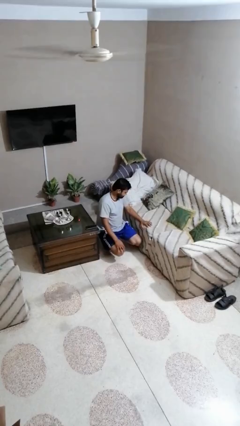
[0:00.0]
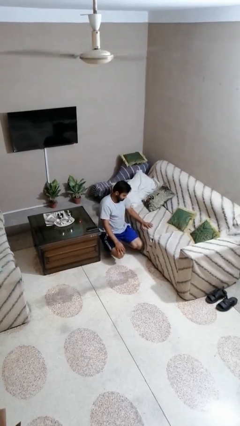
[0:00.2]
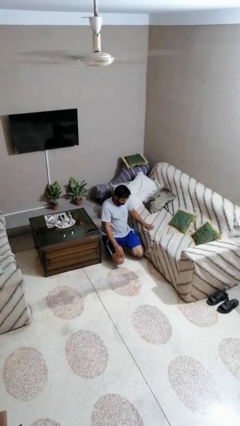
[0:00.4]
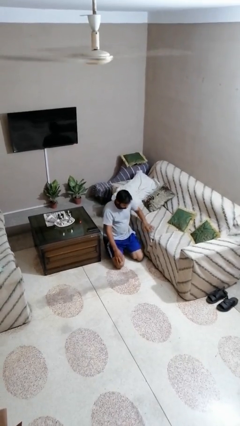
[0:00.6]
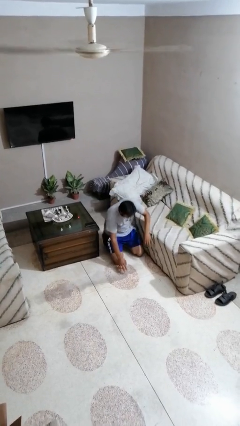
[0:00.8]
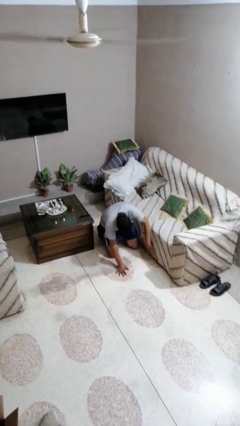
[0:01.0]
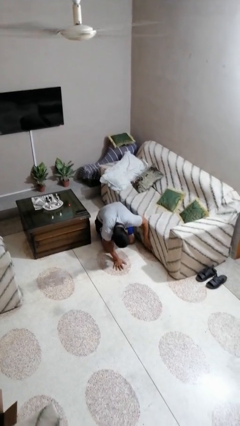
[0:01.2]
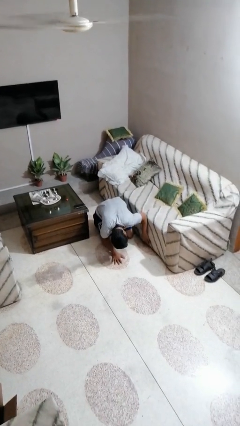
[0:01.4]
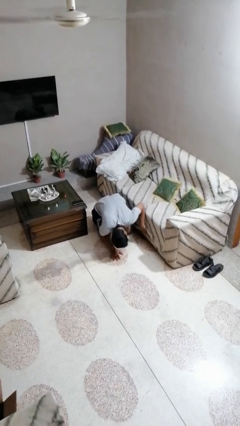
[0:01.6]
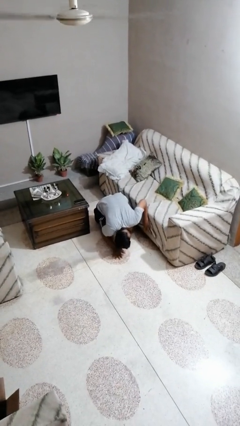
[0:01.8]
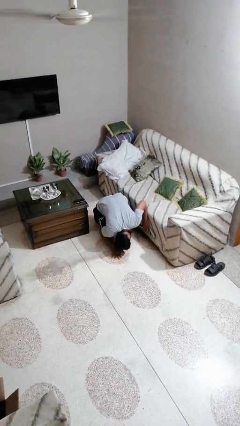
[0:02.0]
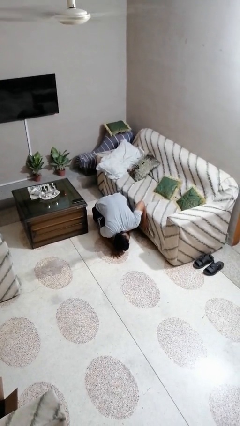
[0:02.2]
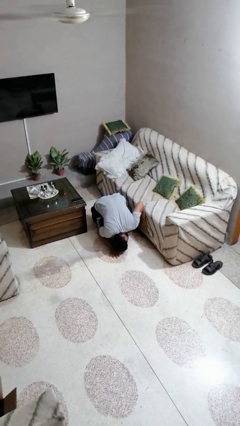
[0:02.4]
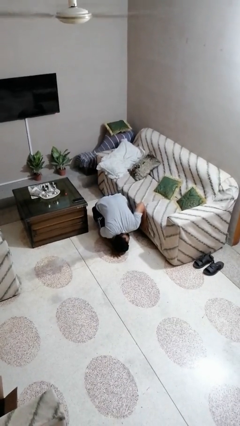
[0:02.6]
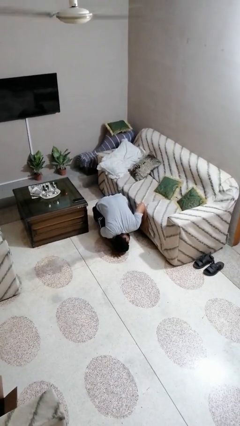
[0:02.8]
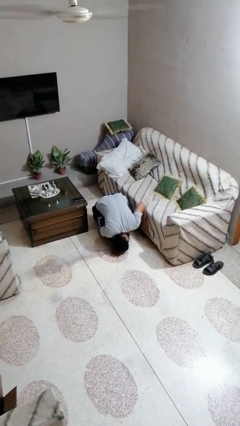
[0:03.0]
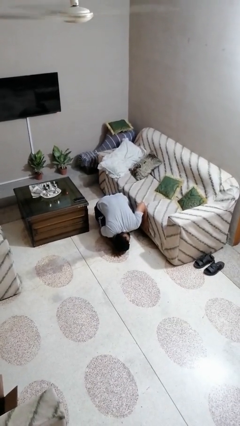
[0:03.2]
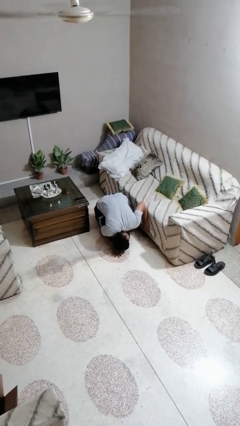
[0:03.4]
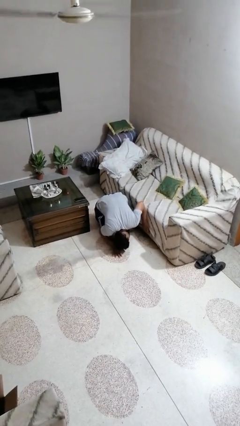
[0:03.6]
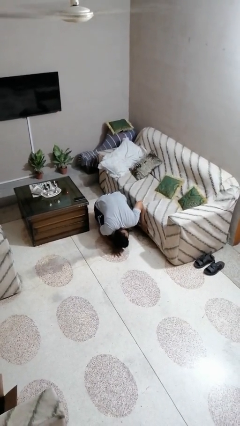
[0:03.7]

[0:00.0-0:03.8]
person searches under couch

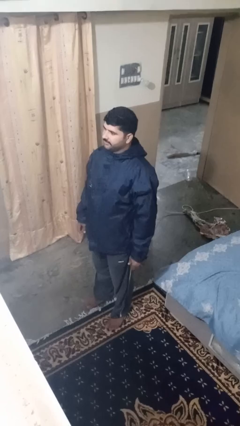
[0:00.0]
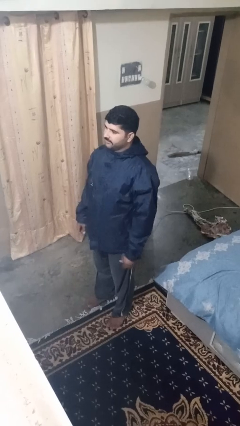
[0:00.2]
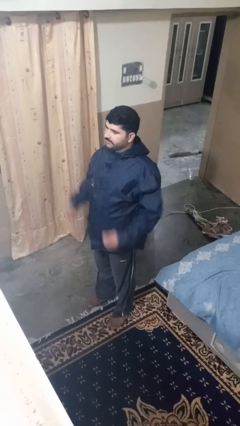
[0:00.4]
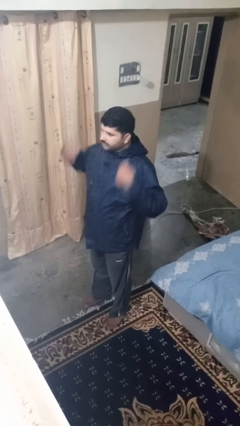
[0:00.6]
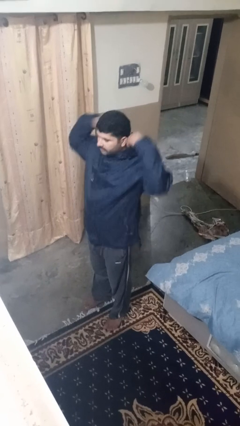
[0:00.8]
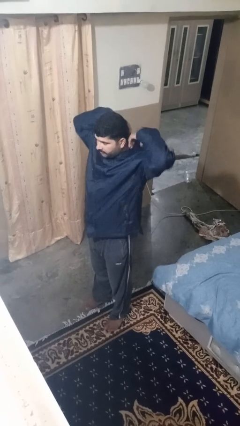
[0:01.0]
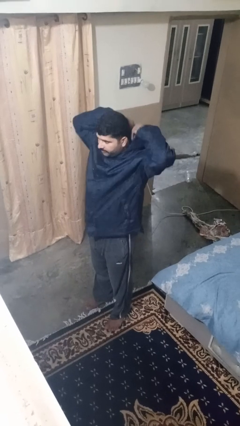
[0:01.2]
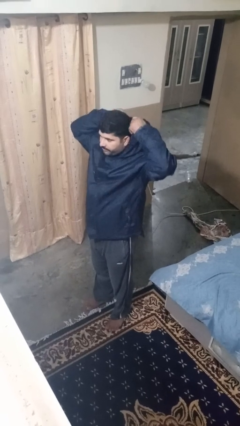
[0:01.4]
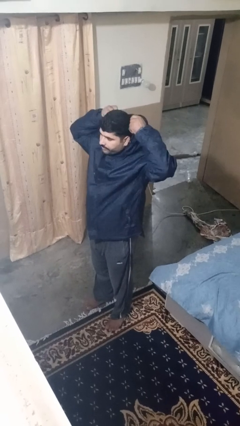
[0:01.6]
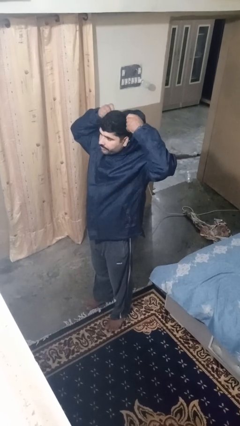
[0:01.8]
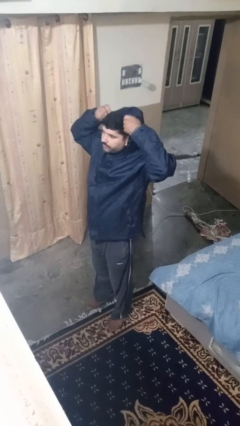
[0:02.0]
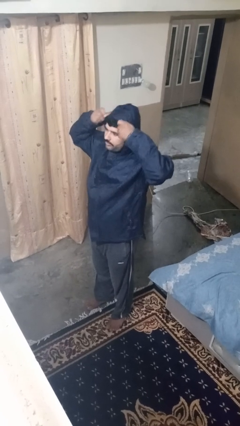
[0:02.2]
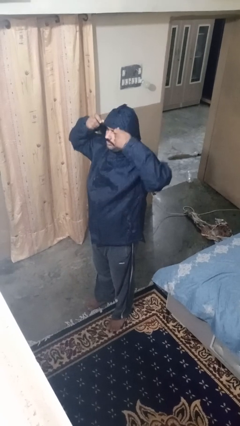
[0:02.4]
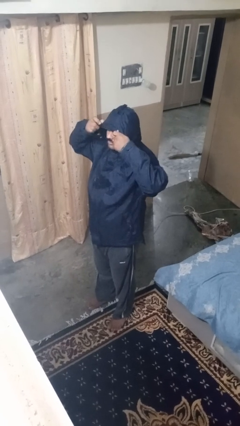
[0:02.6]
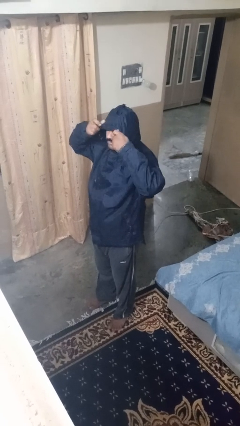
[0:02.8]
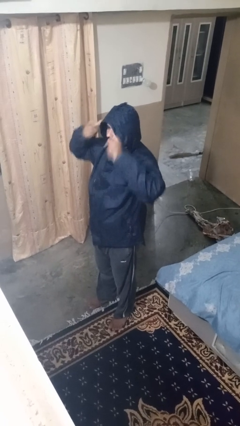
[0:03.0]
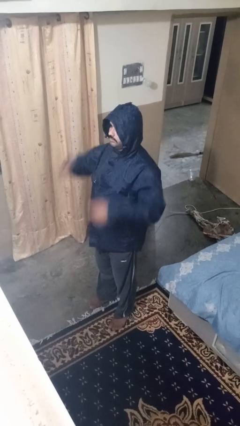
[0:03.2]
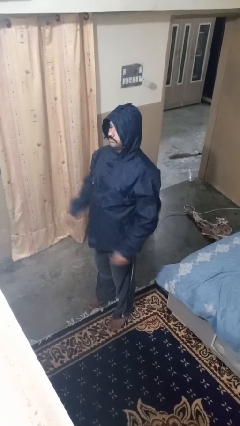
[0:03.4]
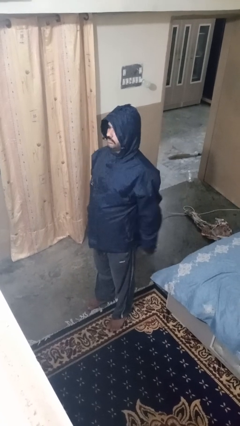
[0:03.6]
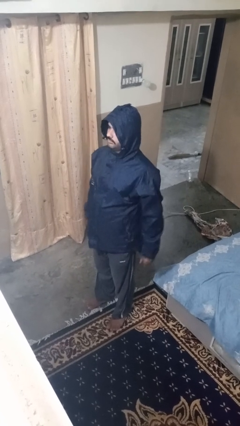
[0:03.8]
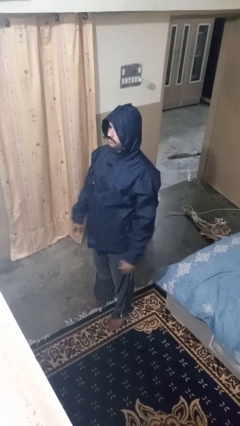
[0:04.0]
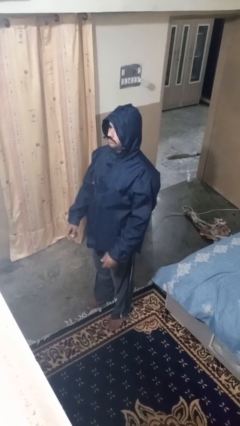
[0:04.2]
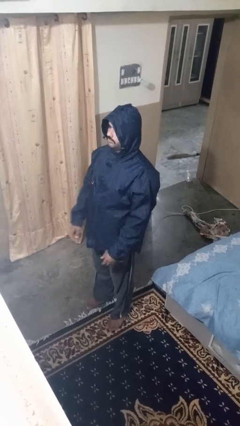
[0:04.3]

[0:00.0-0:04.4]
person puts on hoodie

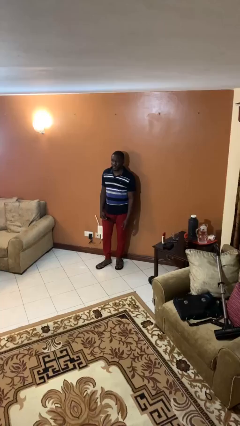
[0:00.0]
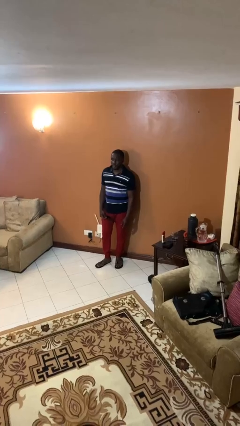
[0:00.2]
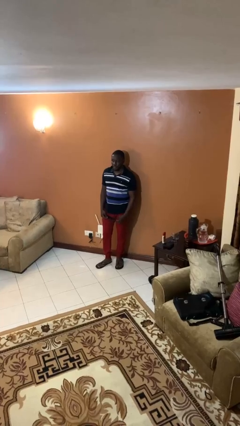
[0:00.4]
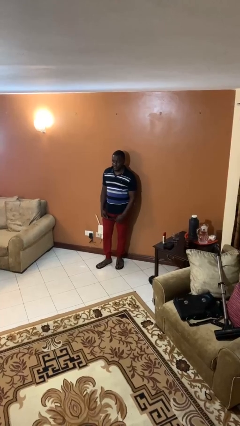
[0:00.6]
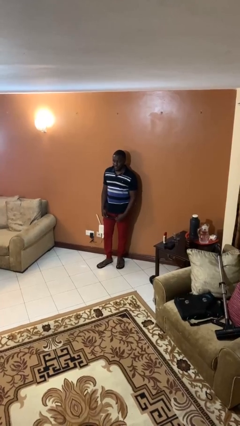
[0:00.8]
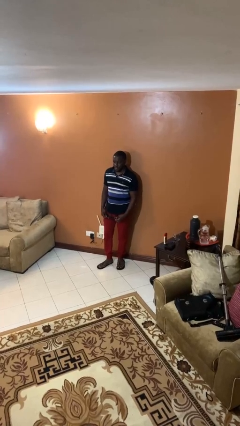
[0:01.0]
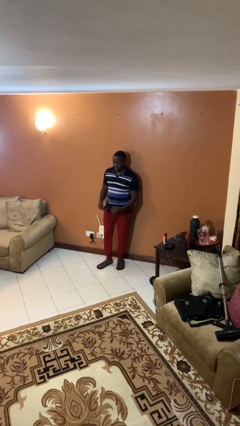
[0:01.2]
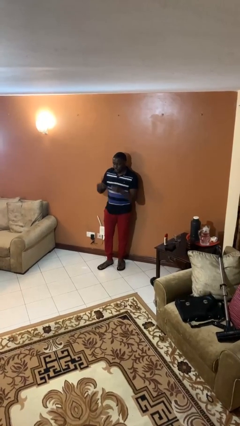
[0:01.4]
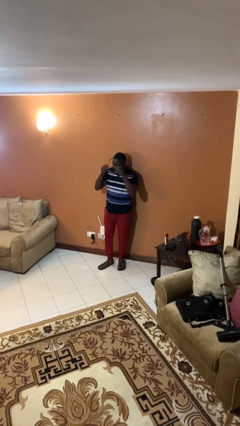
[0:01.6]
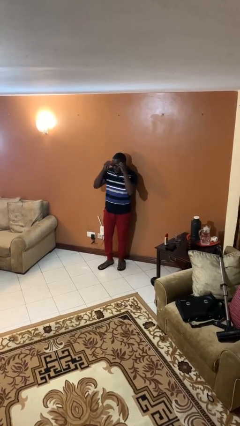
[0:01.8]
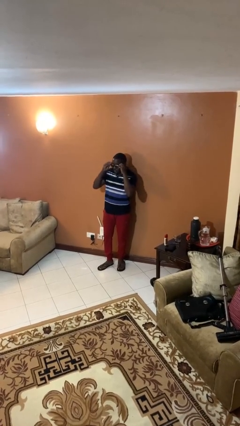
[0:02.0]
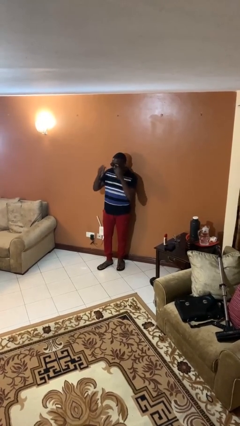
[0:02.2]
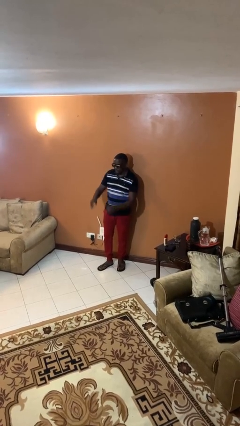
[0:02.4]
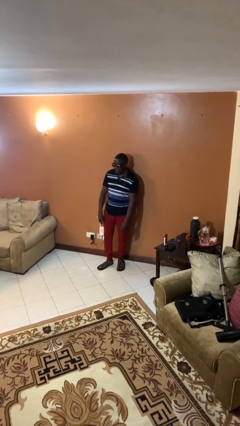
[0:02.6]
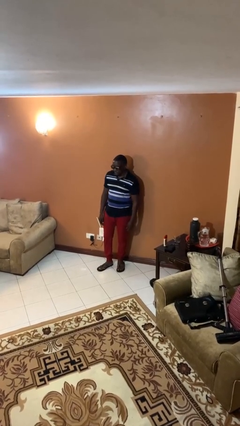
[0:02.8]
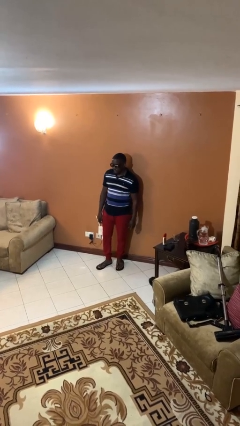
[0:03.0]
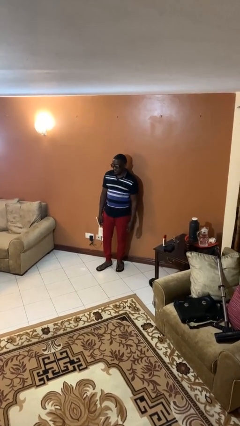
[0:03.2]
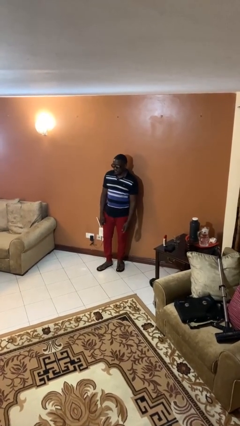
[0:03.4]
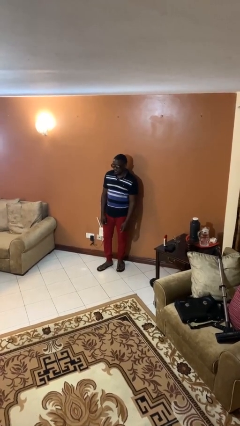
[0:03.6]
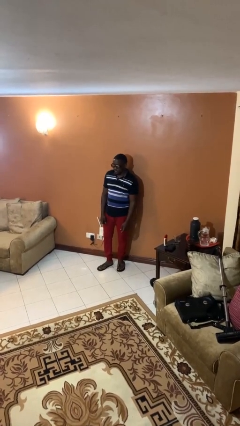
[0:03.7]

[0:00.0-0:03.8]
person puts on sunglasses

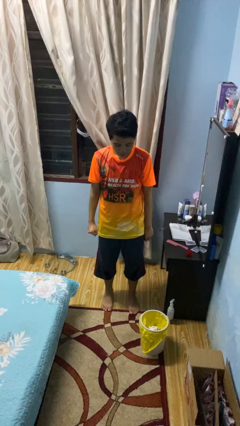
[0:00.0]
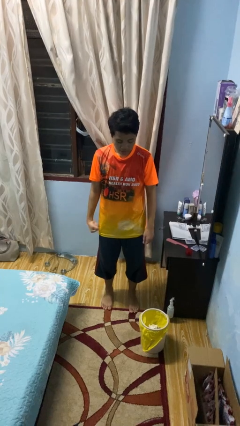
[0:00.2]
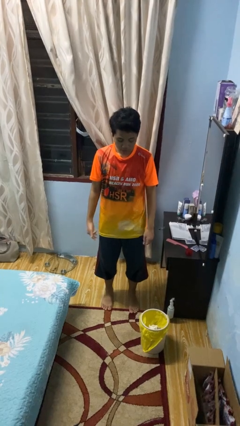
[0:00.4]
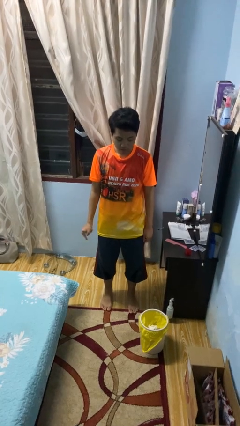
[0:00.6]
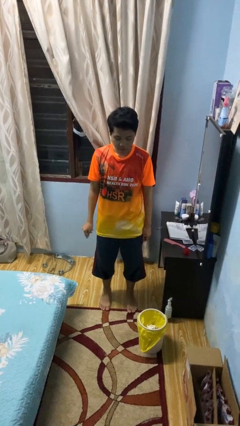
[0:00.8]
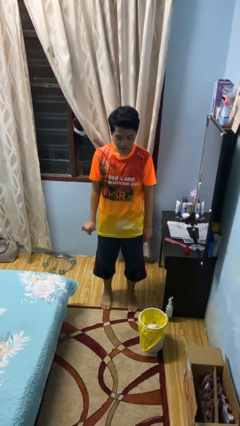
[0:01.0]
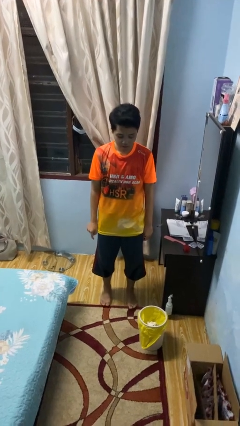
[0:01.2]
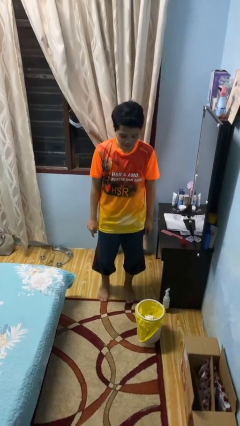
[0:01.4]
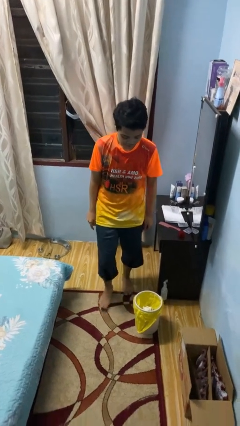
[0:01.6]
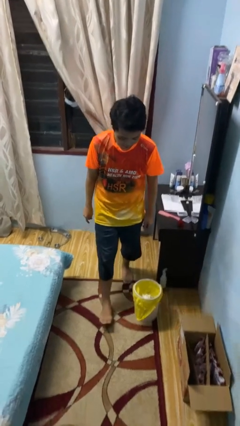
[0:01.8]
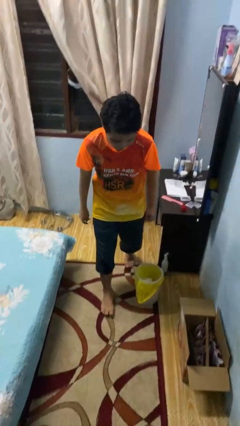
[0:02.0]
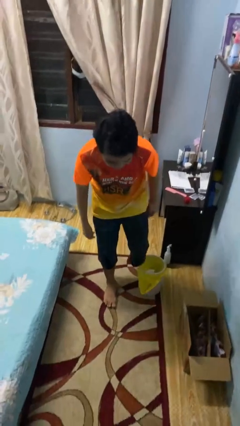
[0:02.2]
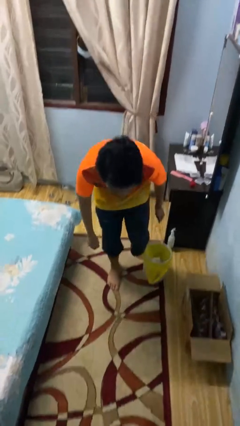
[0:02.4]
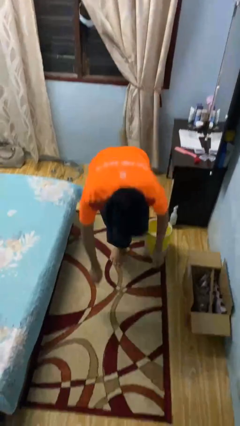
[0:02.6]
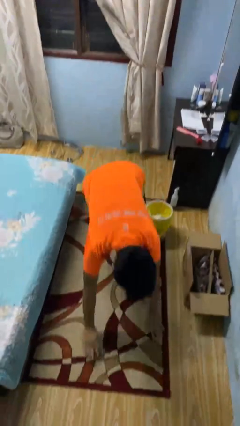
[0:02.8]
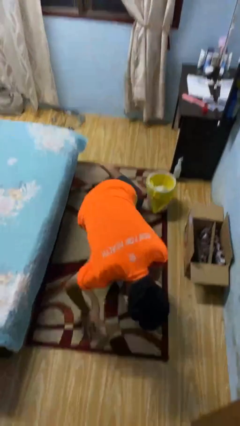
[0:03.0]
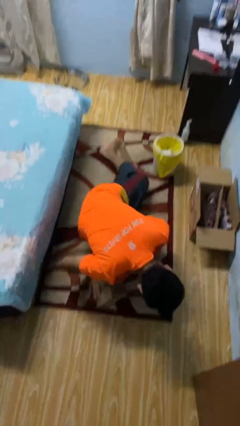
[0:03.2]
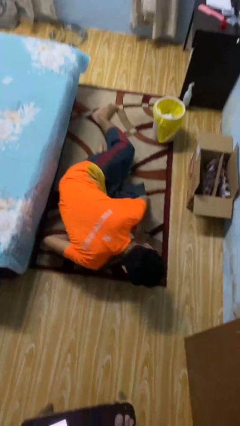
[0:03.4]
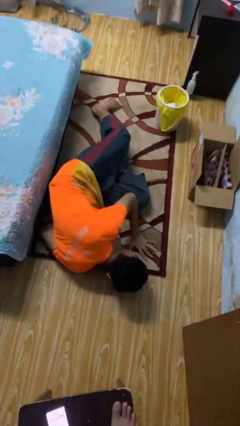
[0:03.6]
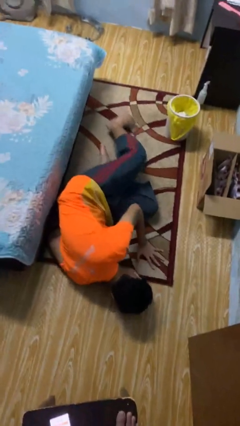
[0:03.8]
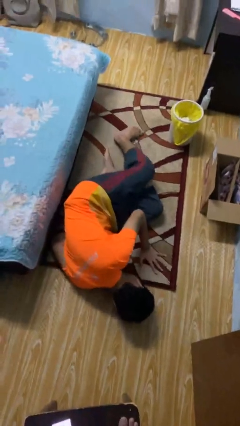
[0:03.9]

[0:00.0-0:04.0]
person trips on object on floor

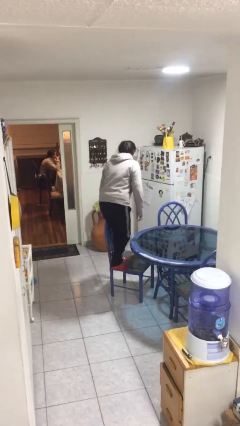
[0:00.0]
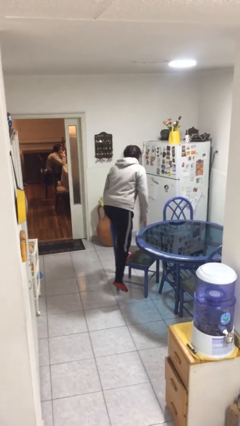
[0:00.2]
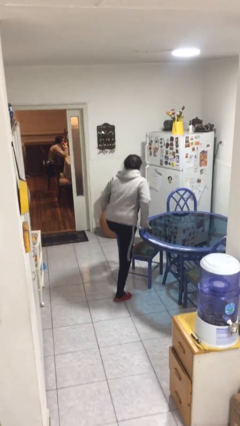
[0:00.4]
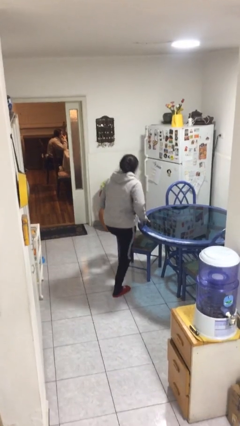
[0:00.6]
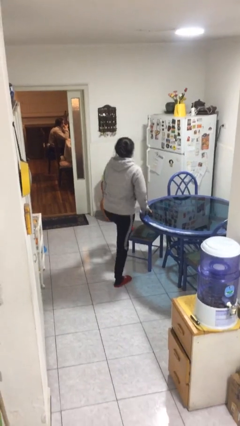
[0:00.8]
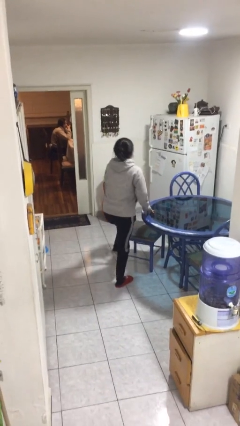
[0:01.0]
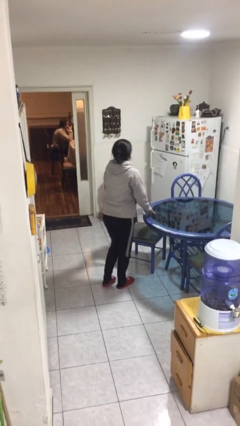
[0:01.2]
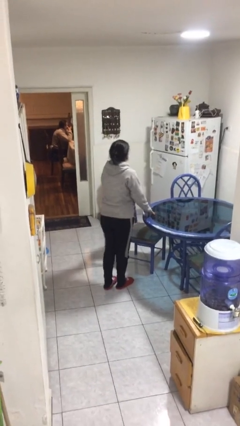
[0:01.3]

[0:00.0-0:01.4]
person climbs off chair

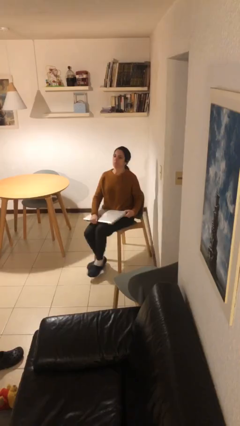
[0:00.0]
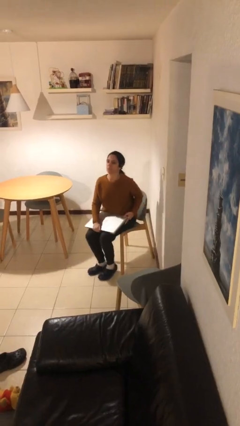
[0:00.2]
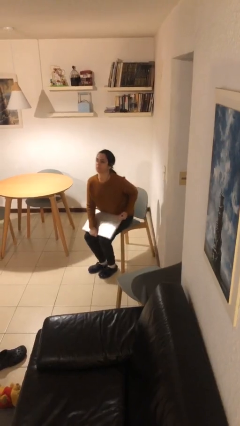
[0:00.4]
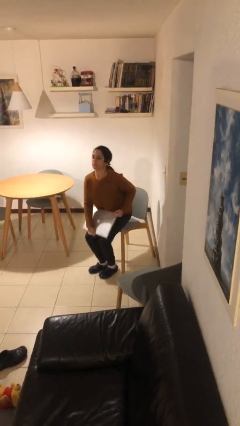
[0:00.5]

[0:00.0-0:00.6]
person sits down
